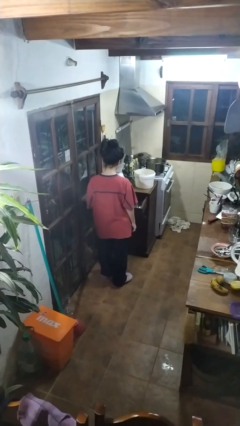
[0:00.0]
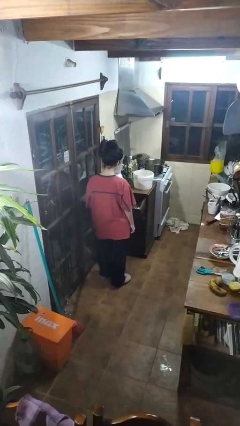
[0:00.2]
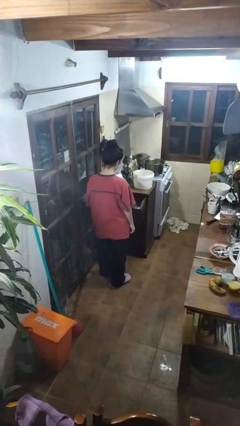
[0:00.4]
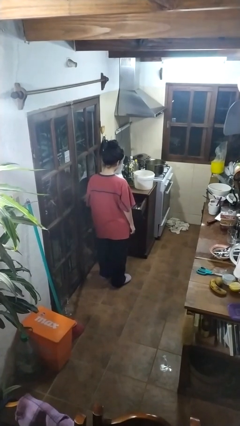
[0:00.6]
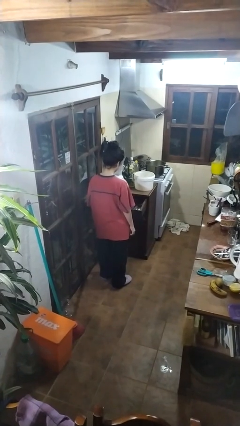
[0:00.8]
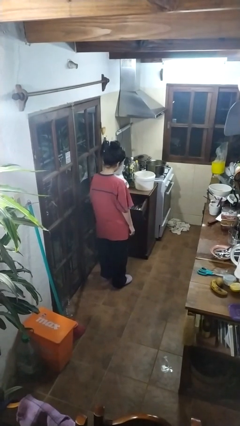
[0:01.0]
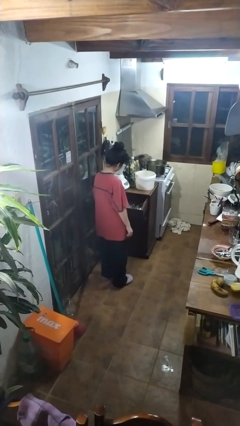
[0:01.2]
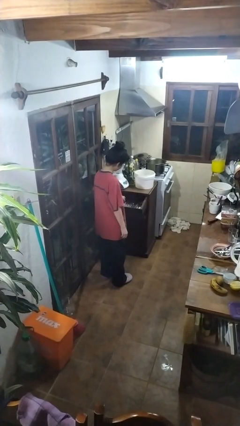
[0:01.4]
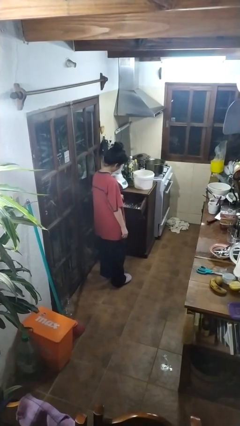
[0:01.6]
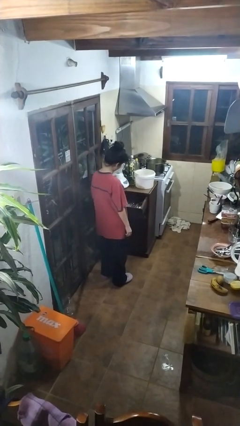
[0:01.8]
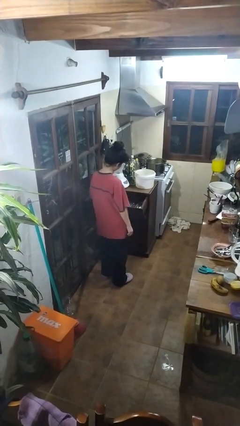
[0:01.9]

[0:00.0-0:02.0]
person puts object into kitchen drawer

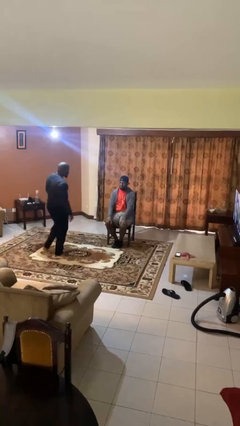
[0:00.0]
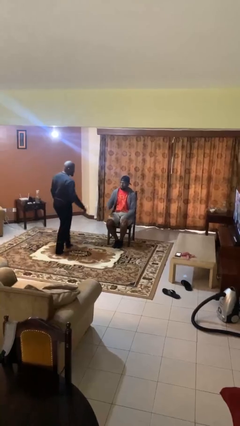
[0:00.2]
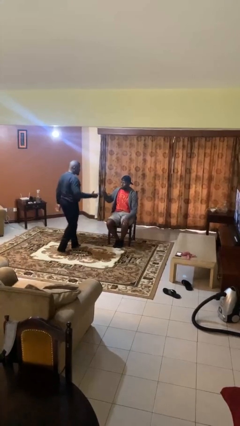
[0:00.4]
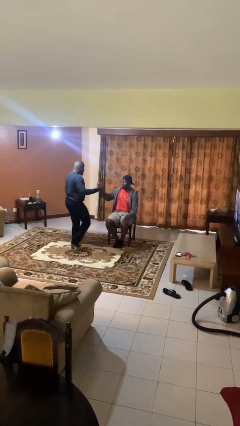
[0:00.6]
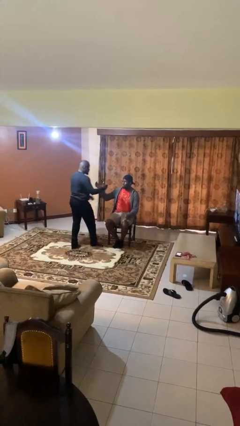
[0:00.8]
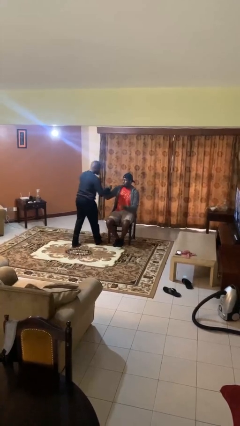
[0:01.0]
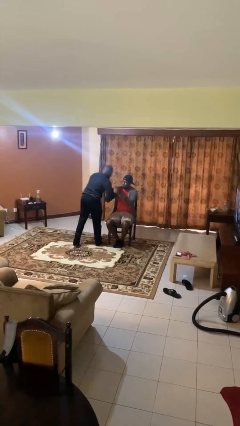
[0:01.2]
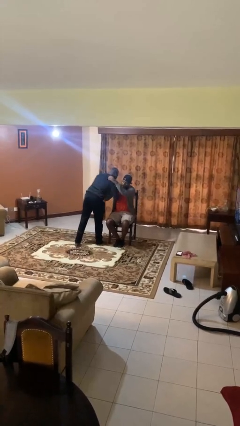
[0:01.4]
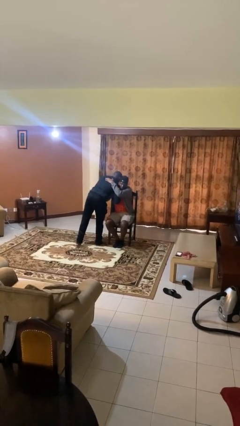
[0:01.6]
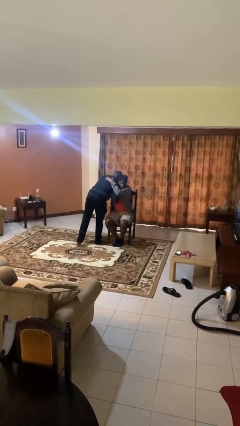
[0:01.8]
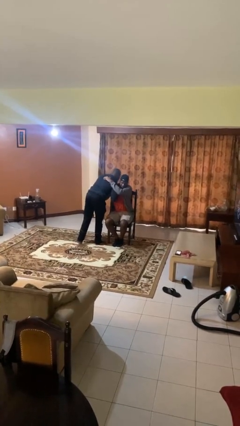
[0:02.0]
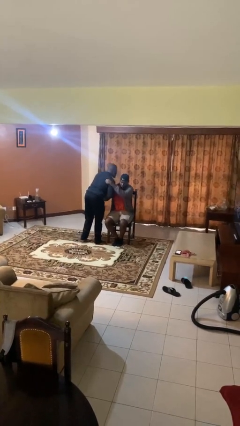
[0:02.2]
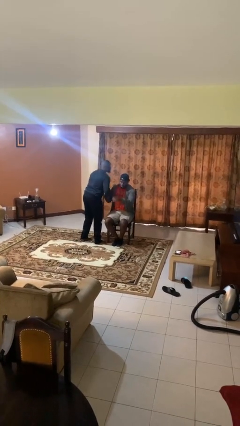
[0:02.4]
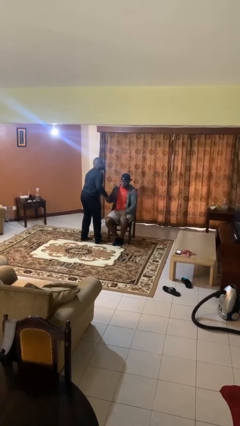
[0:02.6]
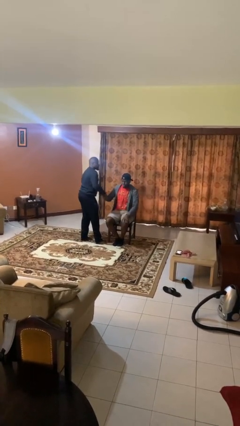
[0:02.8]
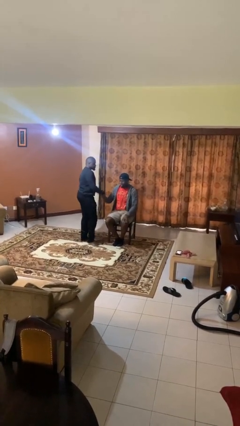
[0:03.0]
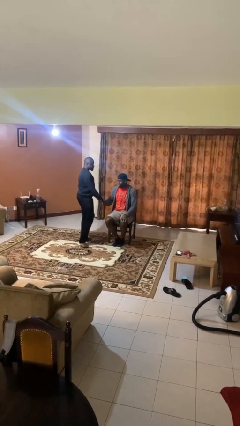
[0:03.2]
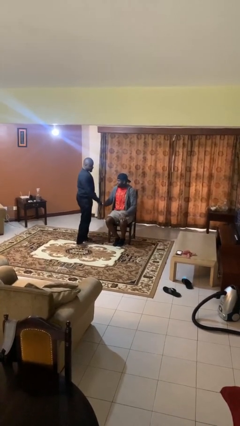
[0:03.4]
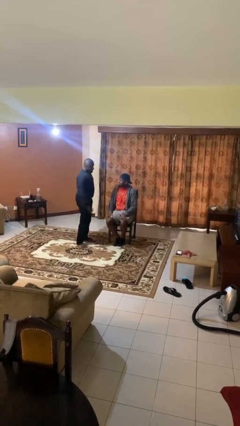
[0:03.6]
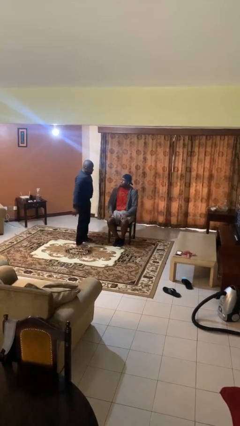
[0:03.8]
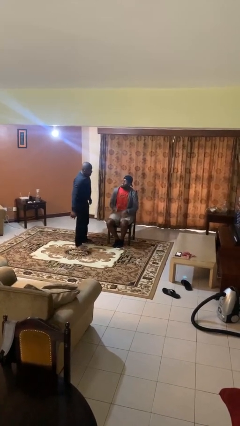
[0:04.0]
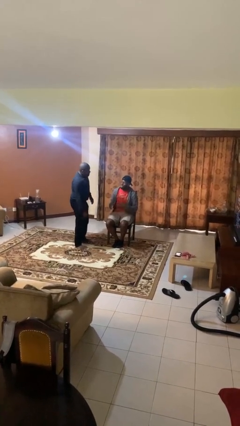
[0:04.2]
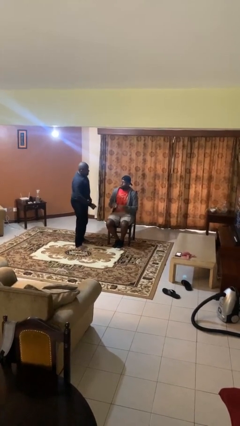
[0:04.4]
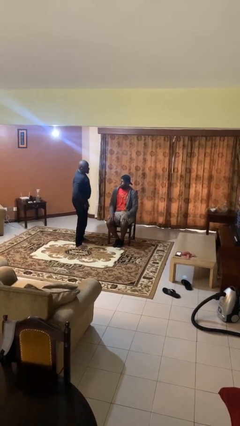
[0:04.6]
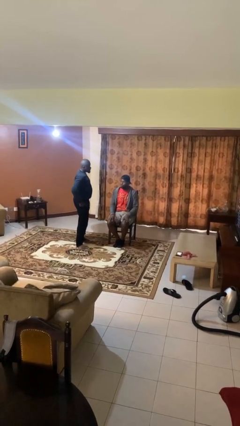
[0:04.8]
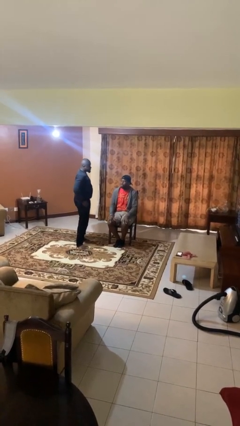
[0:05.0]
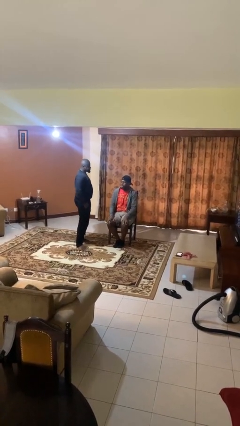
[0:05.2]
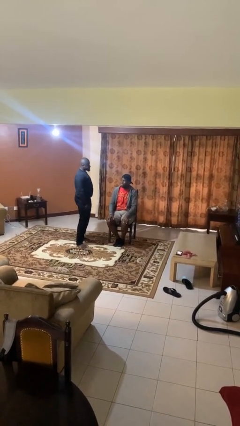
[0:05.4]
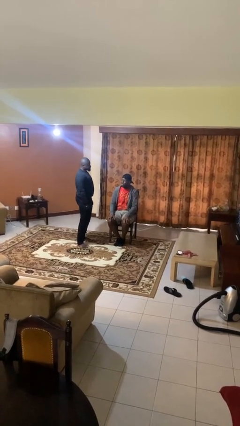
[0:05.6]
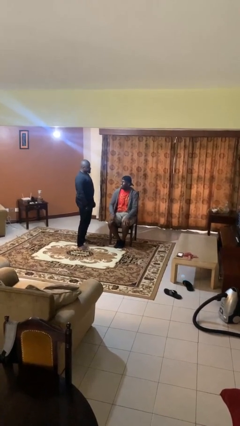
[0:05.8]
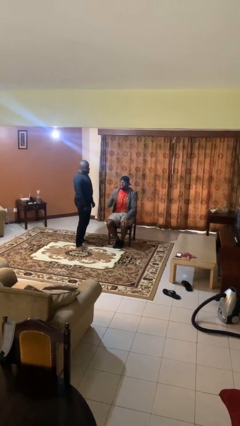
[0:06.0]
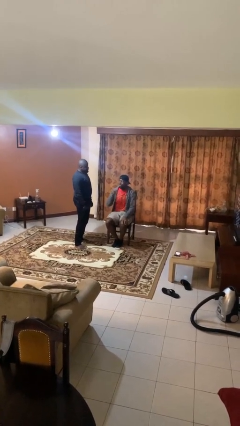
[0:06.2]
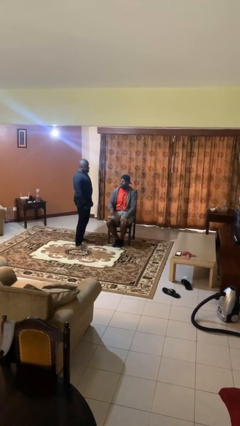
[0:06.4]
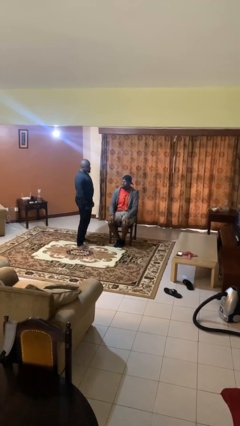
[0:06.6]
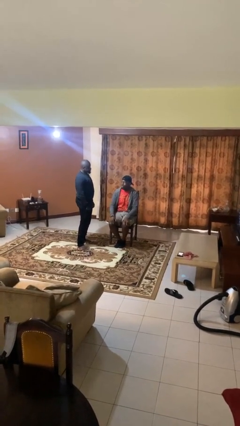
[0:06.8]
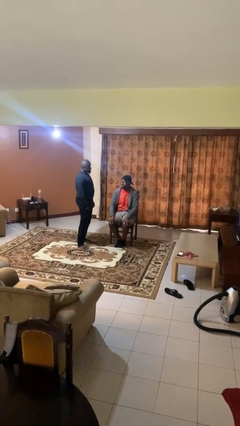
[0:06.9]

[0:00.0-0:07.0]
person embraces person

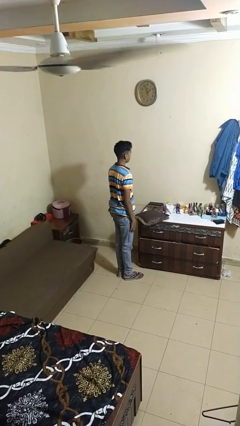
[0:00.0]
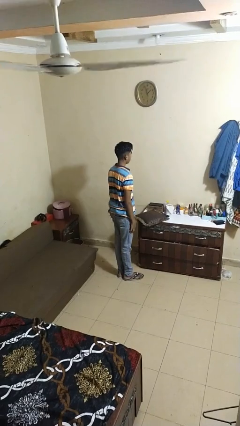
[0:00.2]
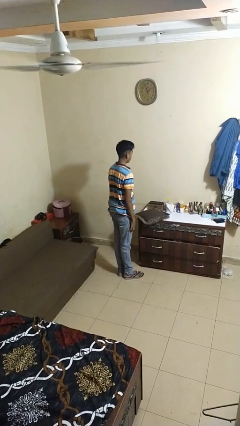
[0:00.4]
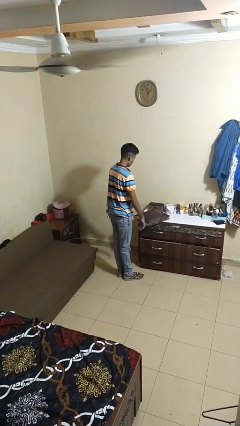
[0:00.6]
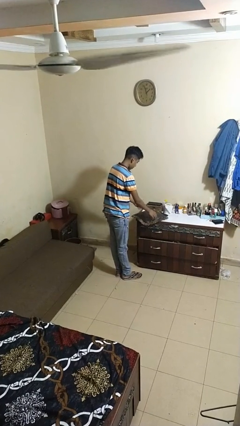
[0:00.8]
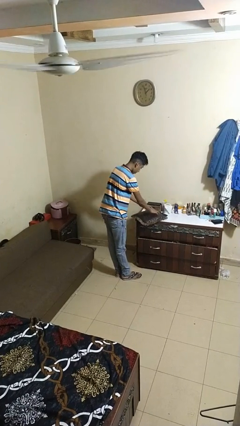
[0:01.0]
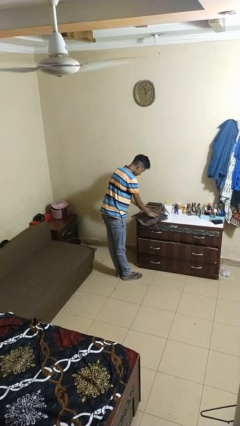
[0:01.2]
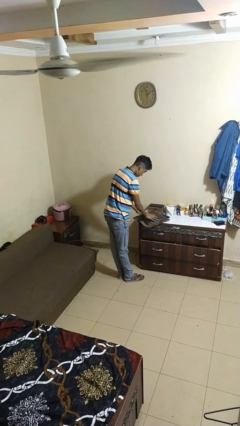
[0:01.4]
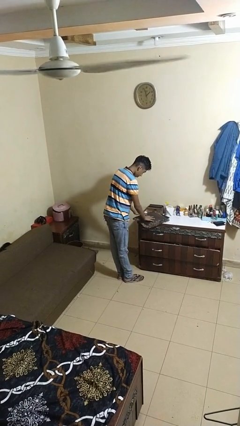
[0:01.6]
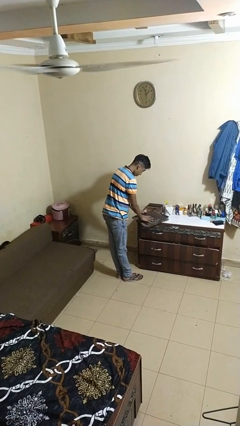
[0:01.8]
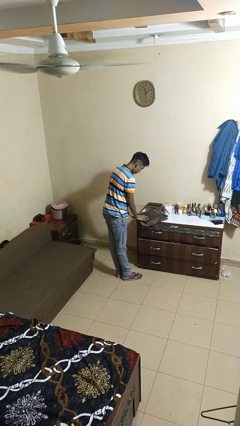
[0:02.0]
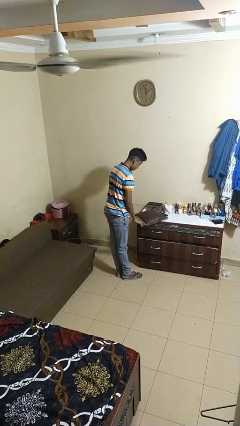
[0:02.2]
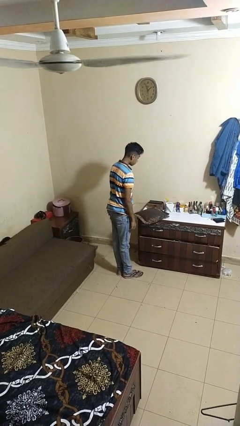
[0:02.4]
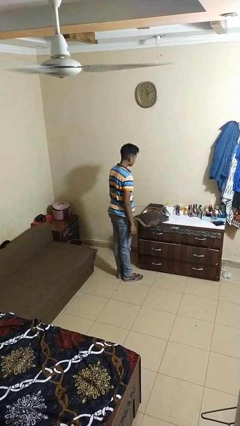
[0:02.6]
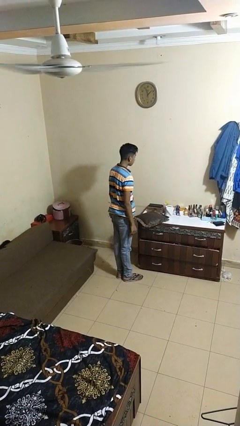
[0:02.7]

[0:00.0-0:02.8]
person waves hand over object

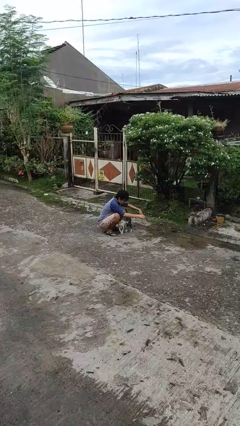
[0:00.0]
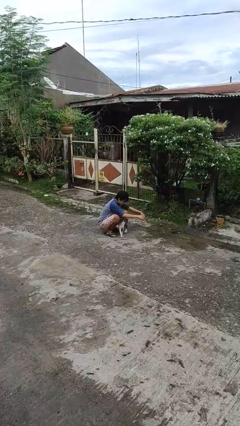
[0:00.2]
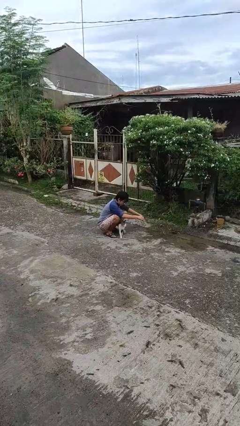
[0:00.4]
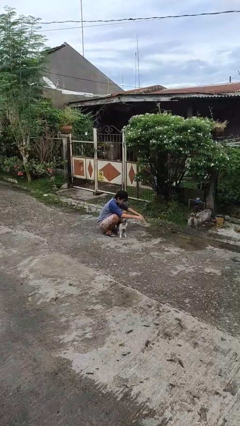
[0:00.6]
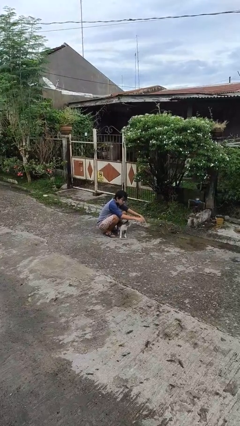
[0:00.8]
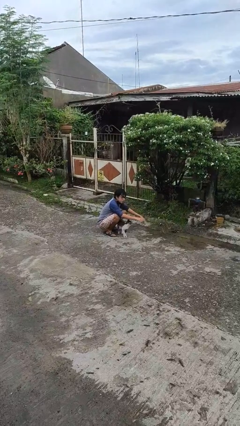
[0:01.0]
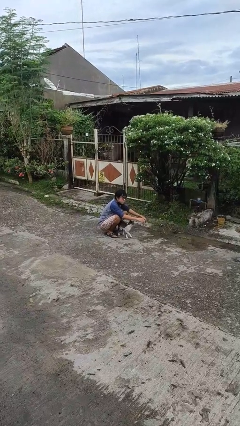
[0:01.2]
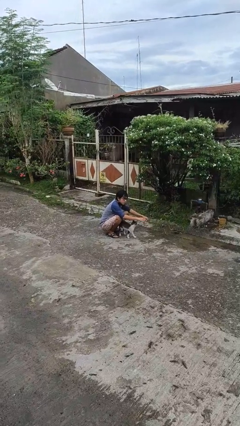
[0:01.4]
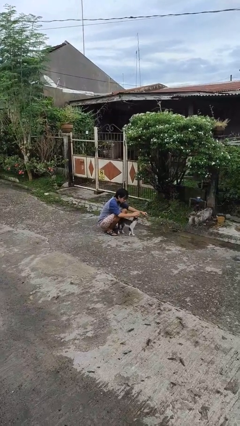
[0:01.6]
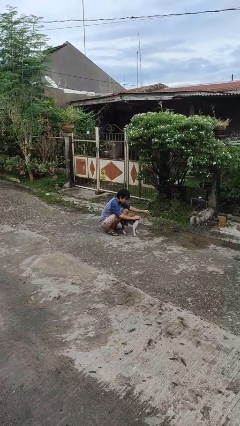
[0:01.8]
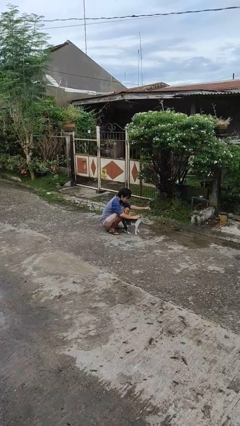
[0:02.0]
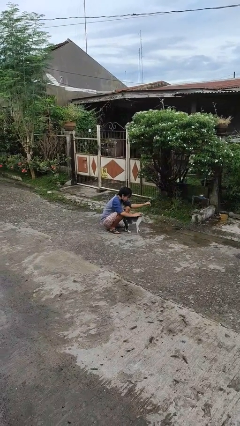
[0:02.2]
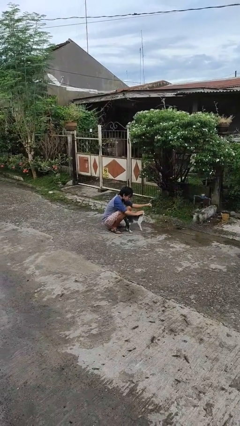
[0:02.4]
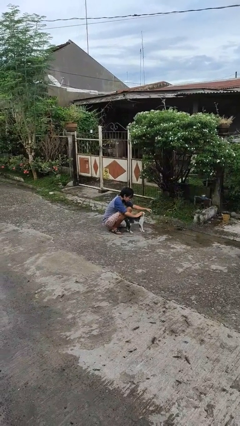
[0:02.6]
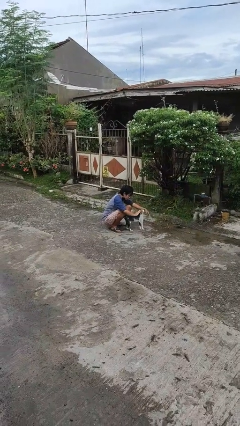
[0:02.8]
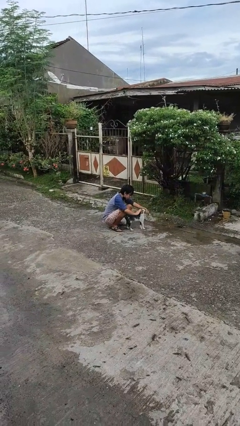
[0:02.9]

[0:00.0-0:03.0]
person pets cat

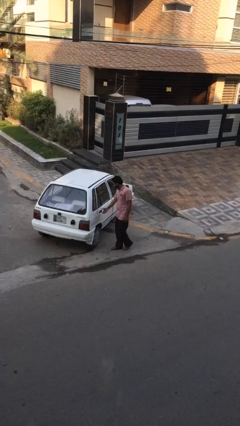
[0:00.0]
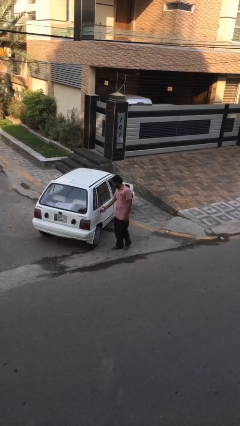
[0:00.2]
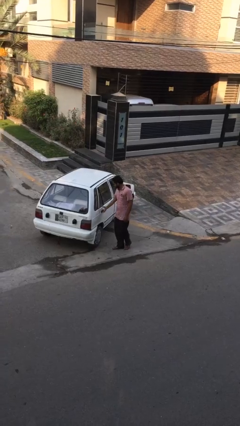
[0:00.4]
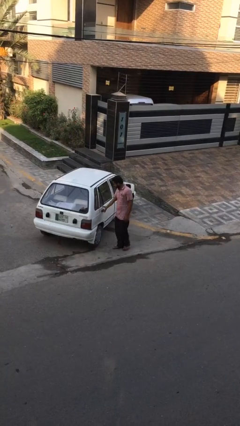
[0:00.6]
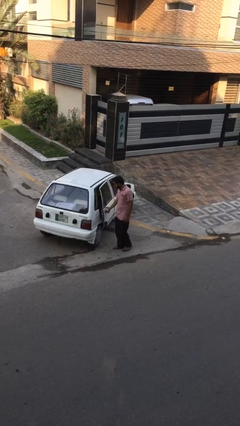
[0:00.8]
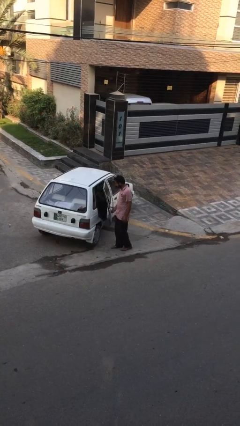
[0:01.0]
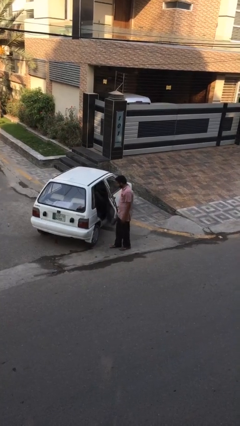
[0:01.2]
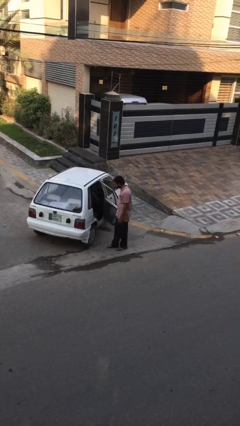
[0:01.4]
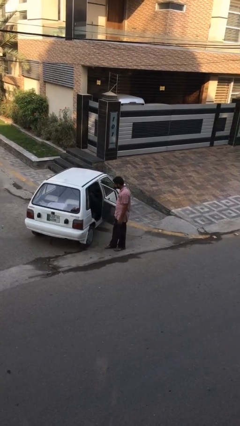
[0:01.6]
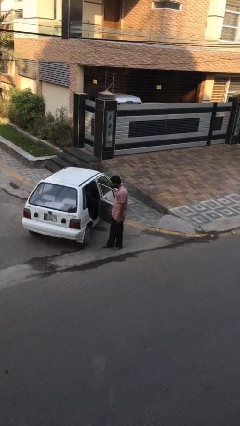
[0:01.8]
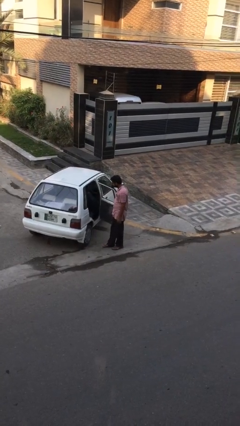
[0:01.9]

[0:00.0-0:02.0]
person opens car door

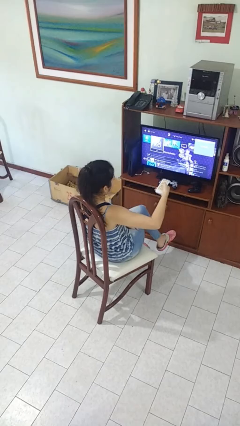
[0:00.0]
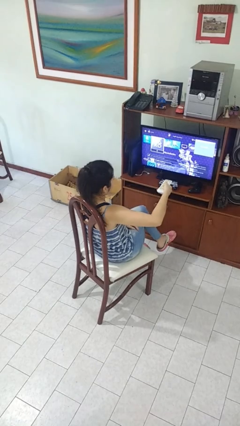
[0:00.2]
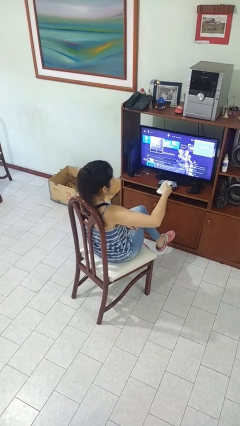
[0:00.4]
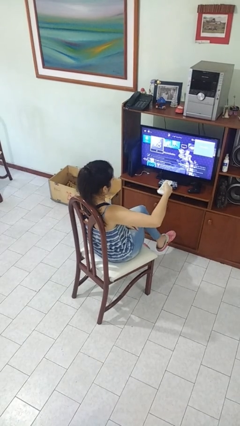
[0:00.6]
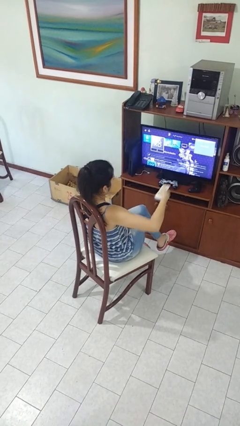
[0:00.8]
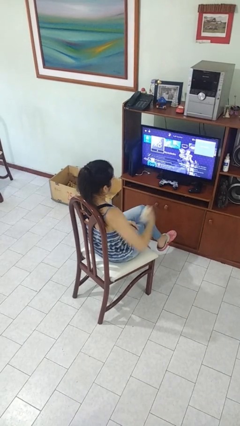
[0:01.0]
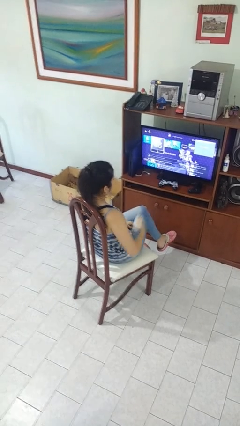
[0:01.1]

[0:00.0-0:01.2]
person uses television remote
